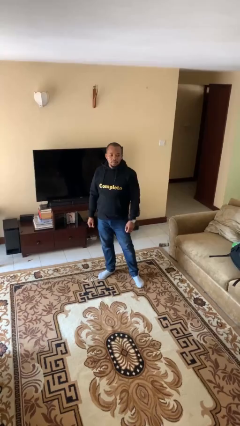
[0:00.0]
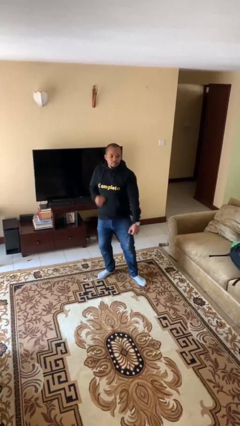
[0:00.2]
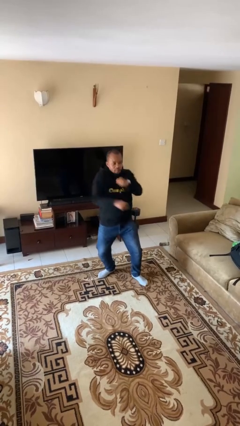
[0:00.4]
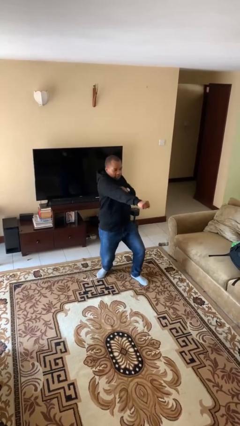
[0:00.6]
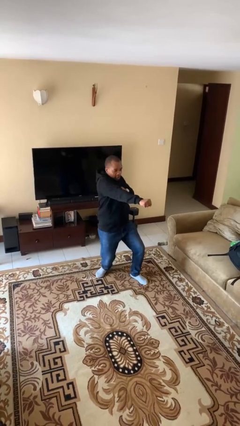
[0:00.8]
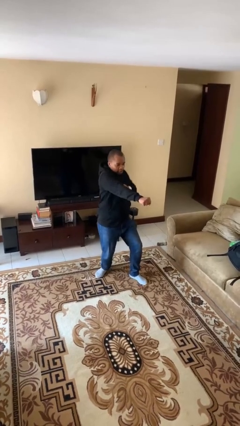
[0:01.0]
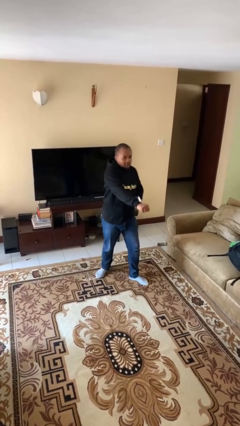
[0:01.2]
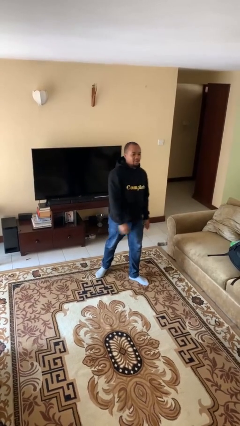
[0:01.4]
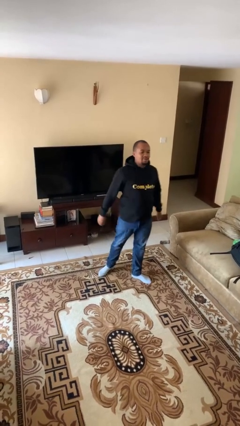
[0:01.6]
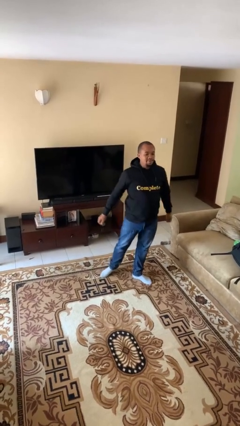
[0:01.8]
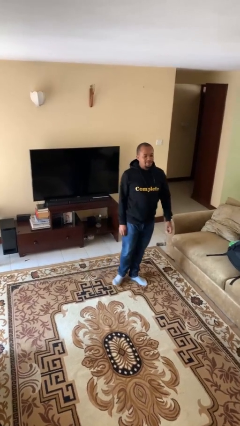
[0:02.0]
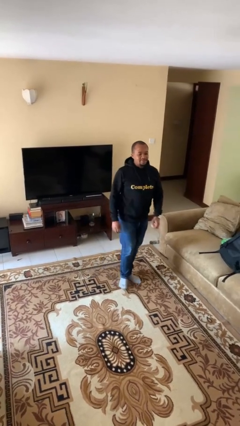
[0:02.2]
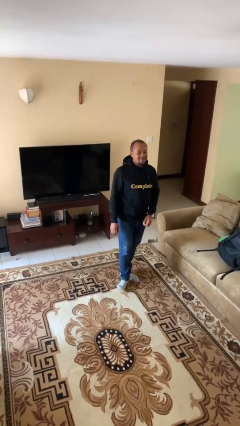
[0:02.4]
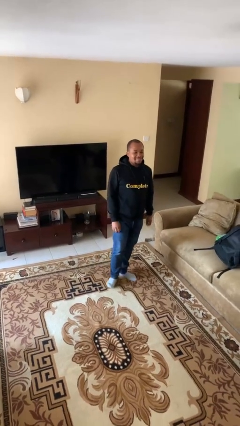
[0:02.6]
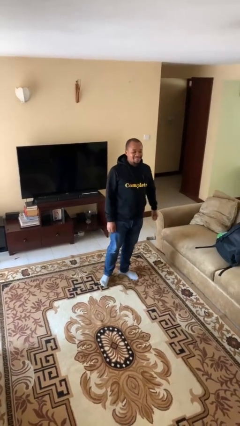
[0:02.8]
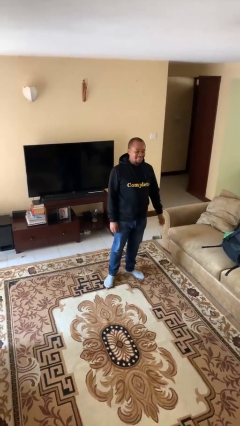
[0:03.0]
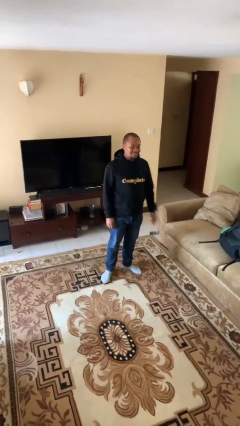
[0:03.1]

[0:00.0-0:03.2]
person punches

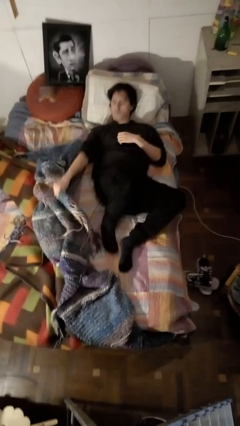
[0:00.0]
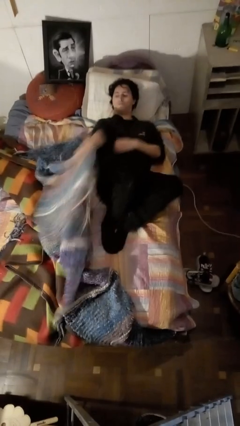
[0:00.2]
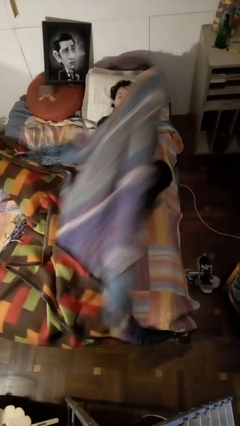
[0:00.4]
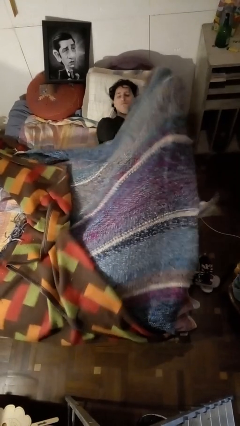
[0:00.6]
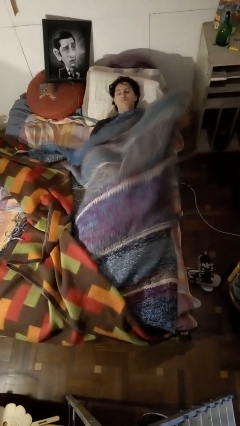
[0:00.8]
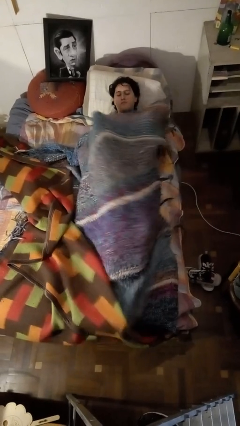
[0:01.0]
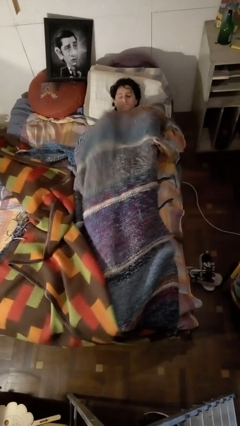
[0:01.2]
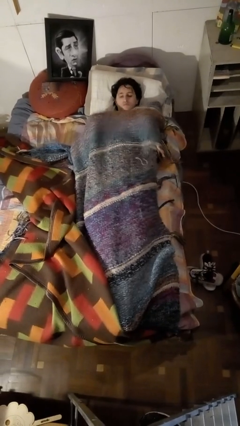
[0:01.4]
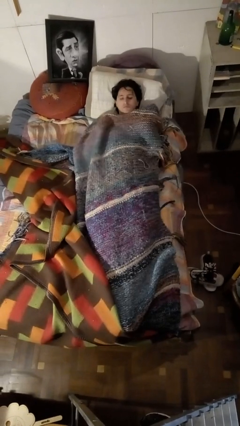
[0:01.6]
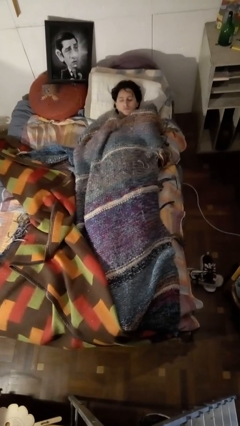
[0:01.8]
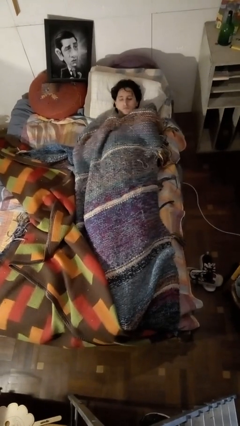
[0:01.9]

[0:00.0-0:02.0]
person covers with bedsheets

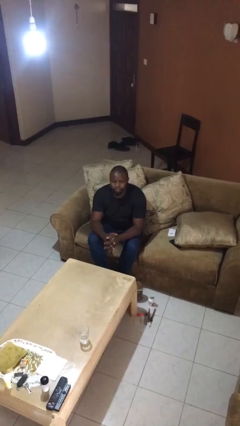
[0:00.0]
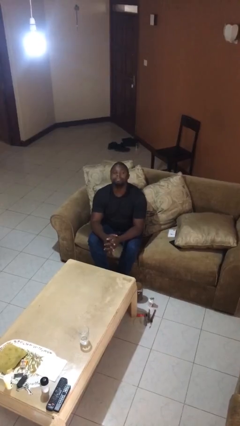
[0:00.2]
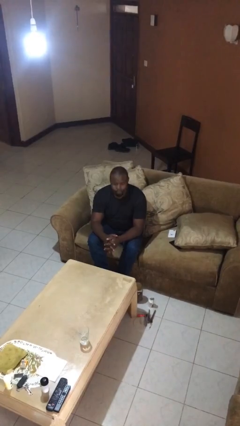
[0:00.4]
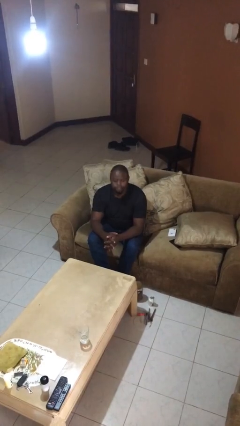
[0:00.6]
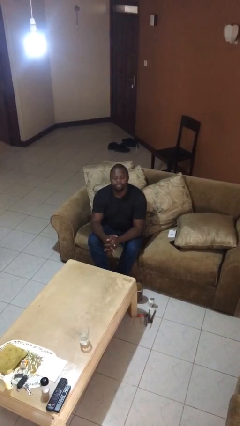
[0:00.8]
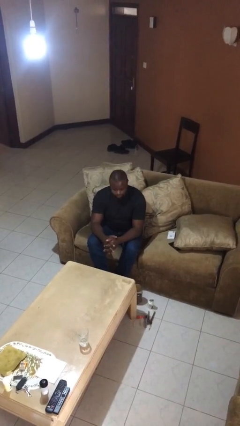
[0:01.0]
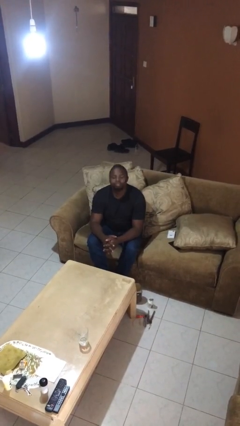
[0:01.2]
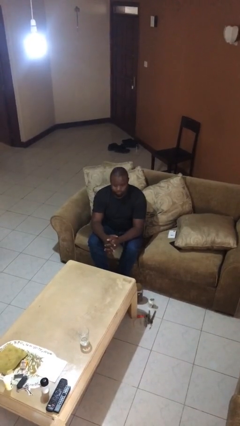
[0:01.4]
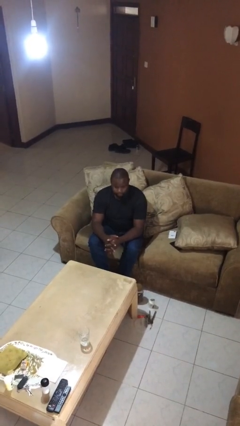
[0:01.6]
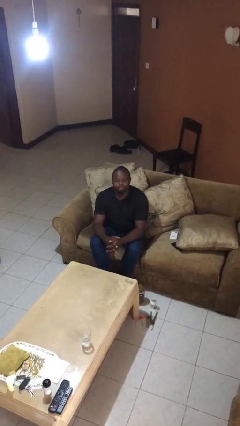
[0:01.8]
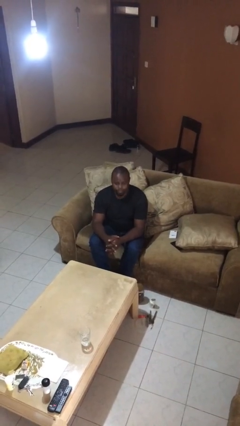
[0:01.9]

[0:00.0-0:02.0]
person nods head

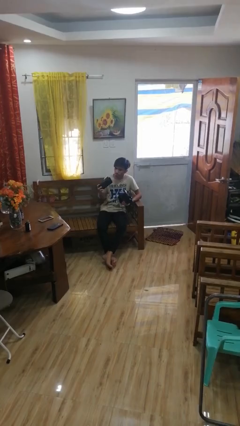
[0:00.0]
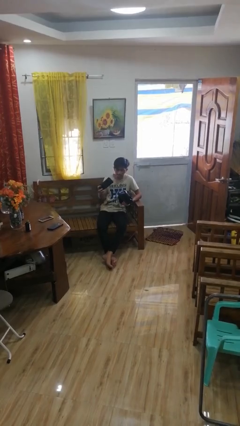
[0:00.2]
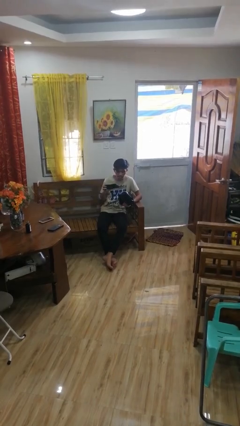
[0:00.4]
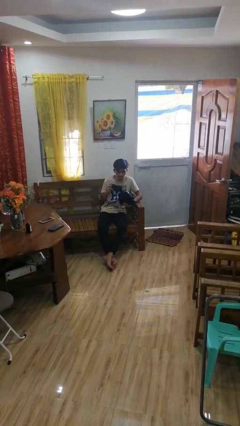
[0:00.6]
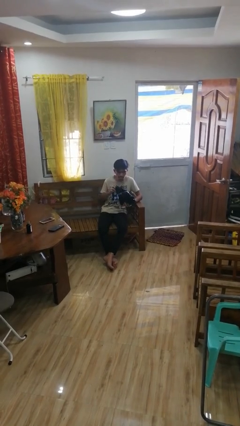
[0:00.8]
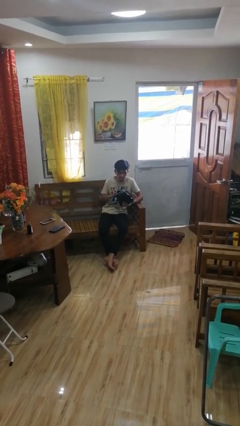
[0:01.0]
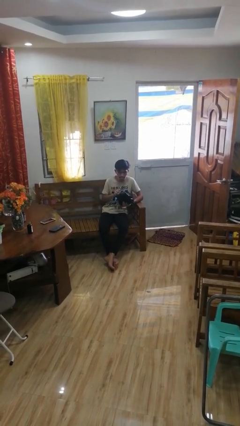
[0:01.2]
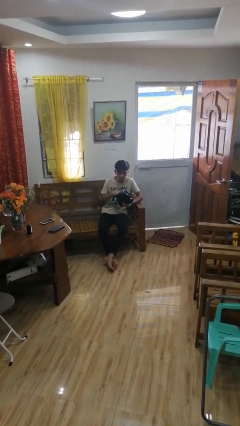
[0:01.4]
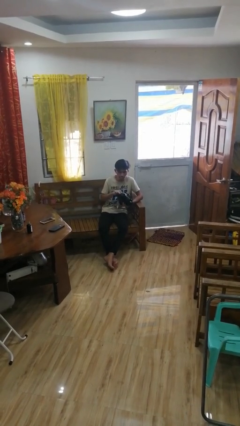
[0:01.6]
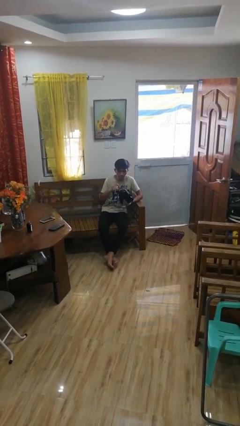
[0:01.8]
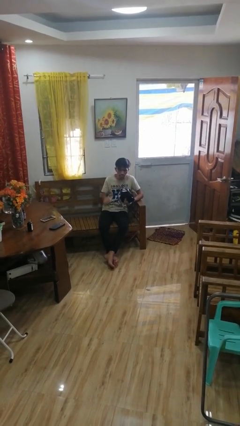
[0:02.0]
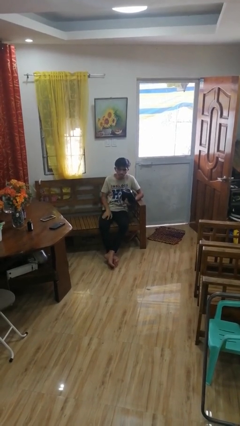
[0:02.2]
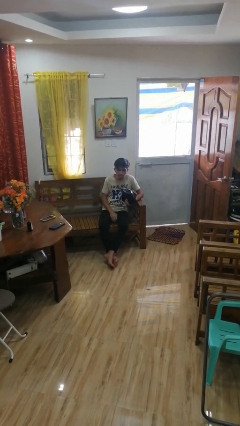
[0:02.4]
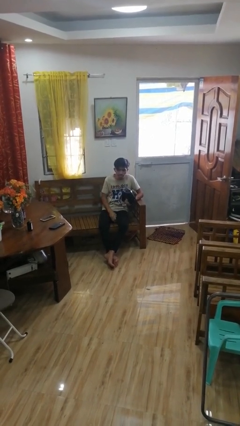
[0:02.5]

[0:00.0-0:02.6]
person puts object into purse

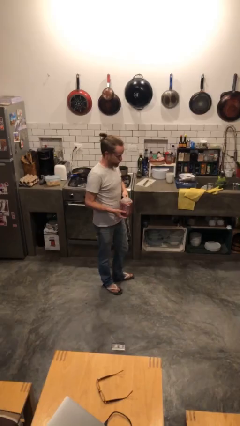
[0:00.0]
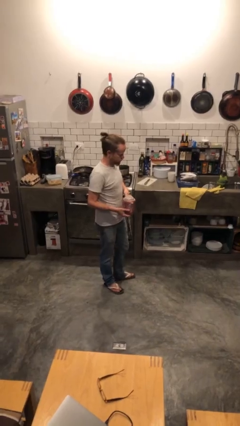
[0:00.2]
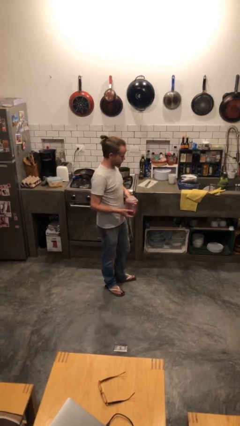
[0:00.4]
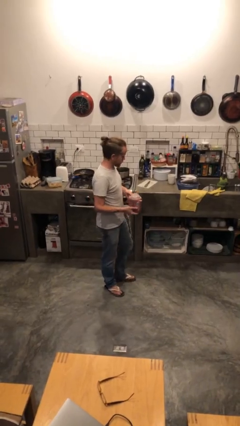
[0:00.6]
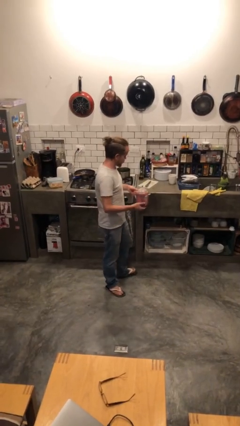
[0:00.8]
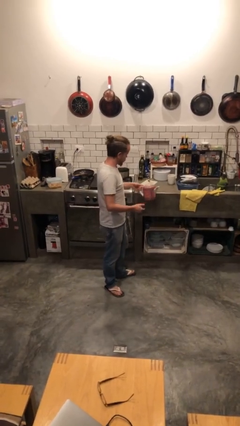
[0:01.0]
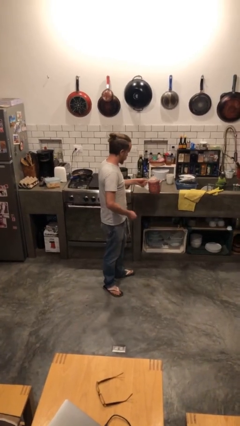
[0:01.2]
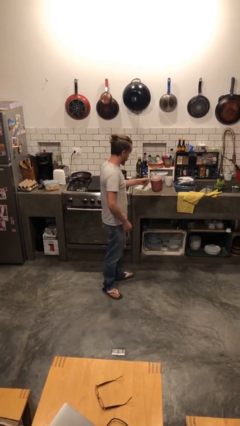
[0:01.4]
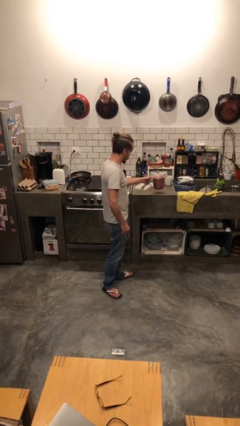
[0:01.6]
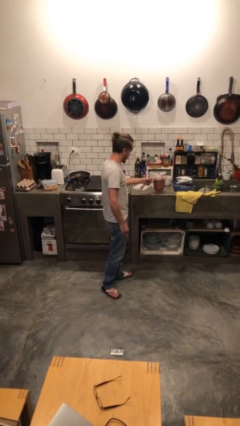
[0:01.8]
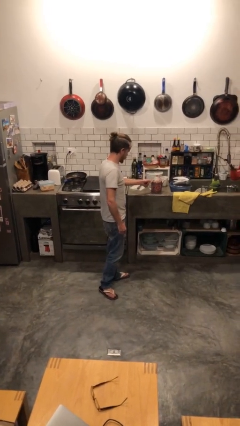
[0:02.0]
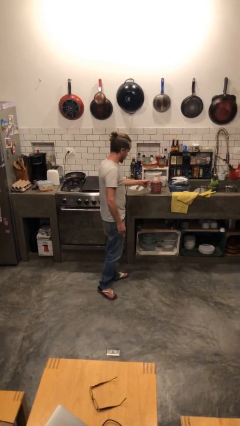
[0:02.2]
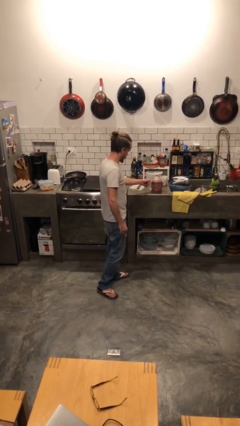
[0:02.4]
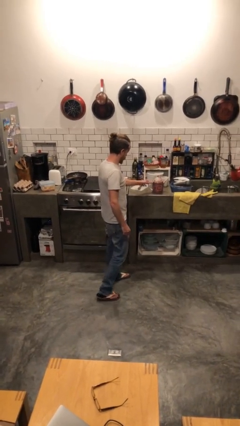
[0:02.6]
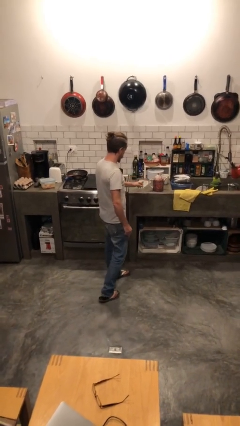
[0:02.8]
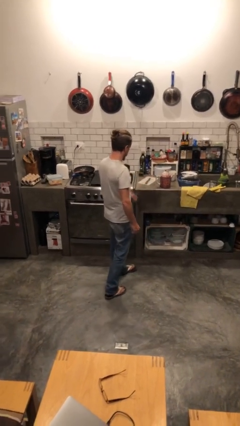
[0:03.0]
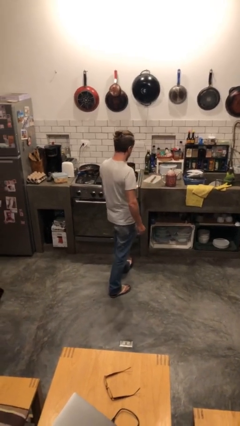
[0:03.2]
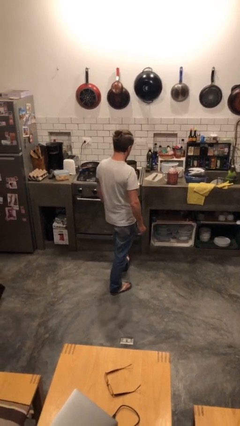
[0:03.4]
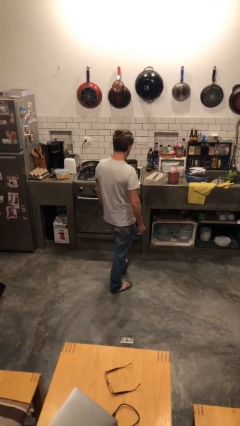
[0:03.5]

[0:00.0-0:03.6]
person puts down object on countertop

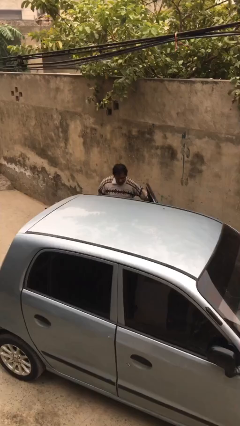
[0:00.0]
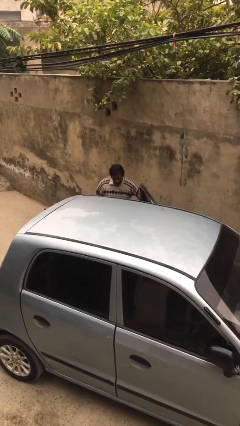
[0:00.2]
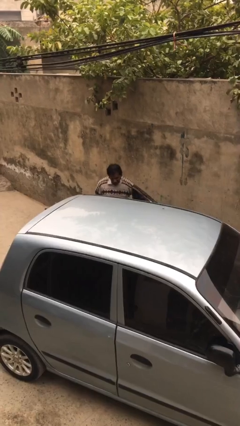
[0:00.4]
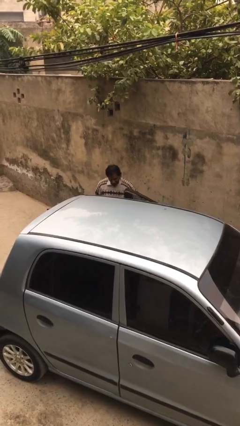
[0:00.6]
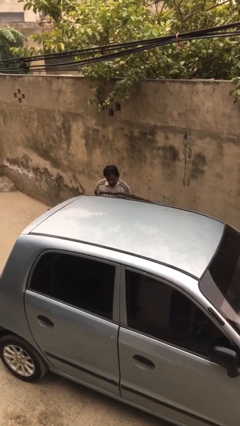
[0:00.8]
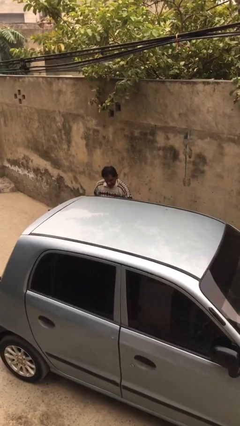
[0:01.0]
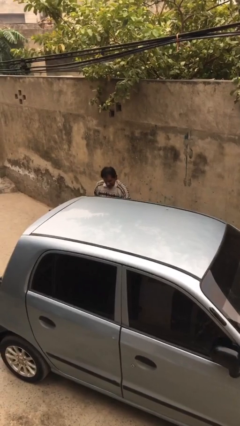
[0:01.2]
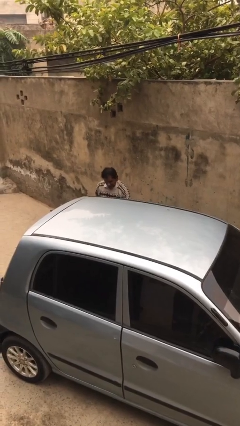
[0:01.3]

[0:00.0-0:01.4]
person closes car door

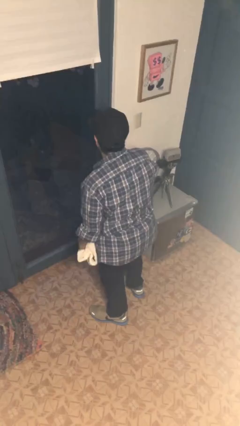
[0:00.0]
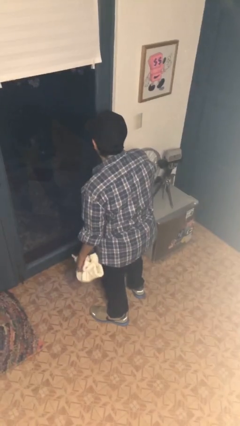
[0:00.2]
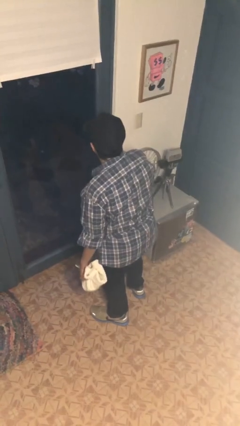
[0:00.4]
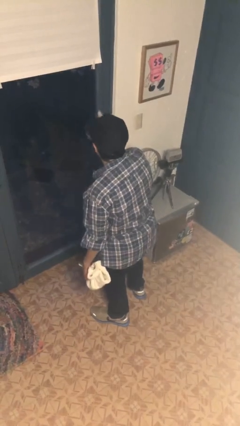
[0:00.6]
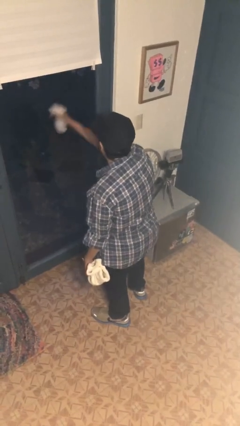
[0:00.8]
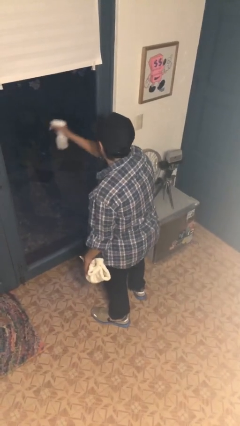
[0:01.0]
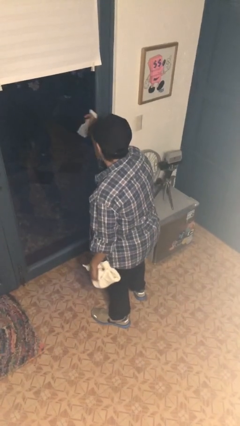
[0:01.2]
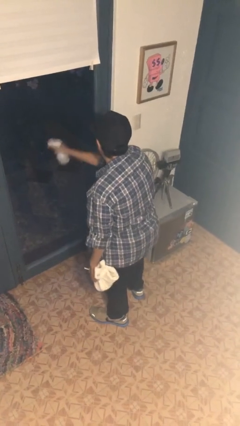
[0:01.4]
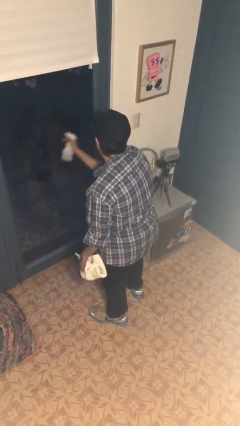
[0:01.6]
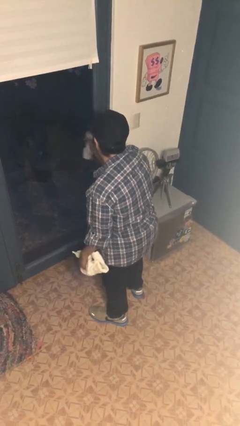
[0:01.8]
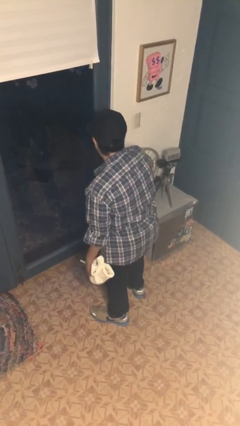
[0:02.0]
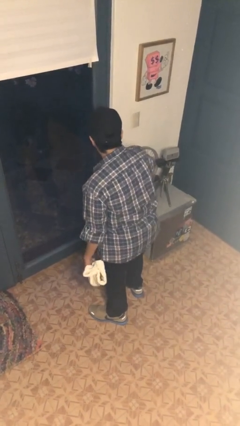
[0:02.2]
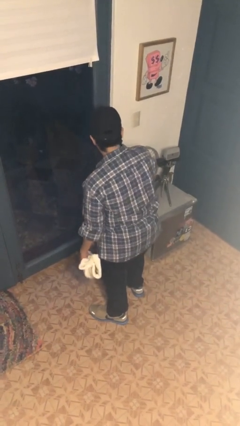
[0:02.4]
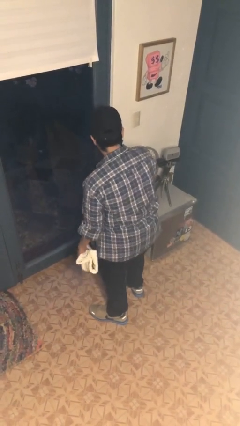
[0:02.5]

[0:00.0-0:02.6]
person sprays from bottle
